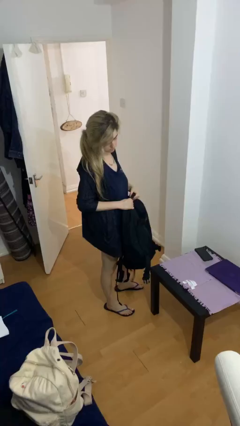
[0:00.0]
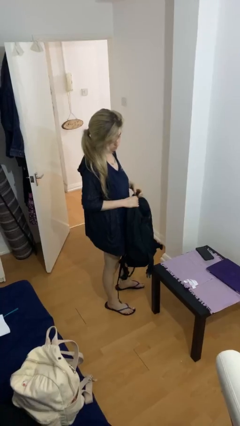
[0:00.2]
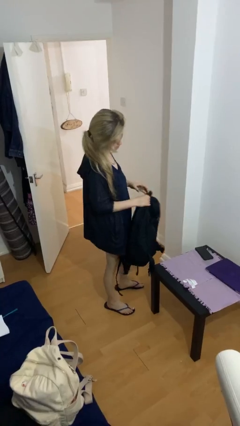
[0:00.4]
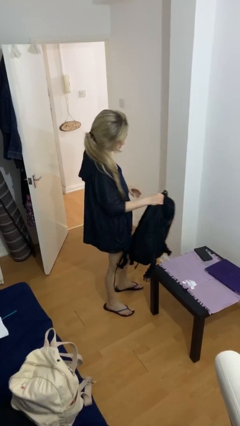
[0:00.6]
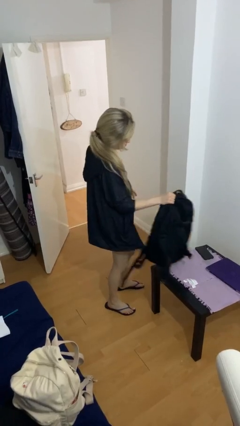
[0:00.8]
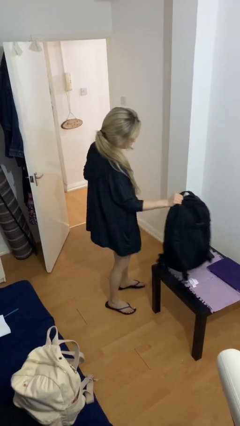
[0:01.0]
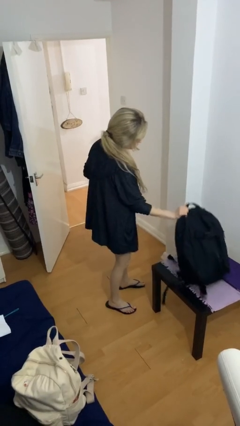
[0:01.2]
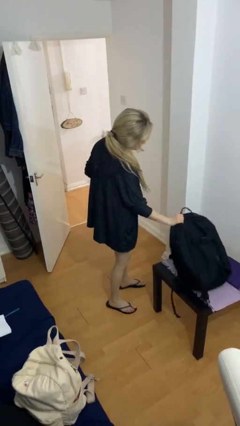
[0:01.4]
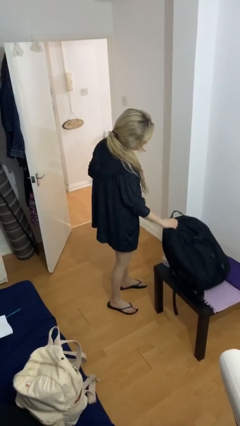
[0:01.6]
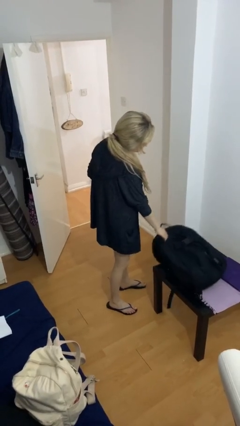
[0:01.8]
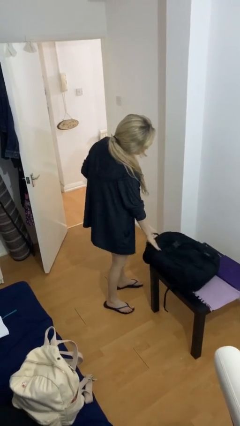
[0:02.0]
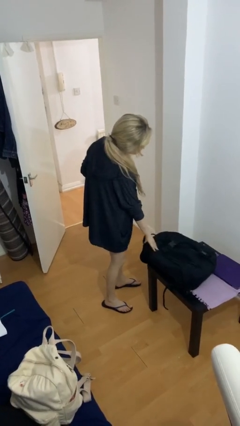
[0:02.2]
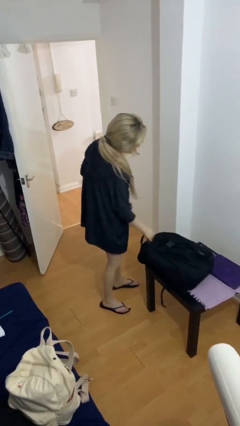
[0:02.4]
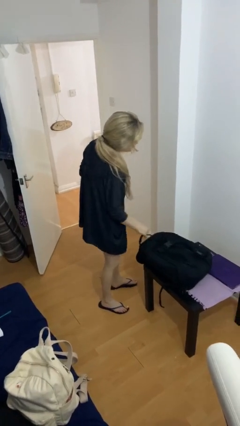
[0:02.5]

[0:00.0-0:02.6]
person puts down object on table

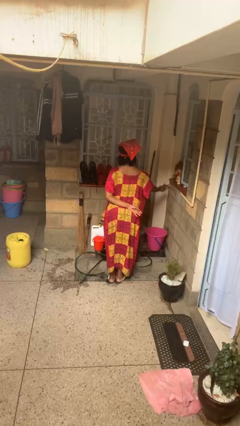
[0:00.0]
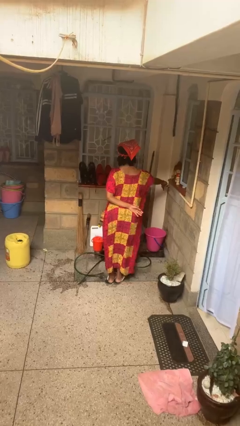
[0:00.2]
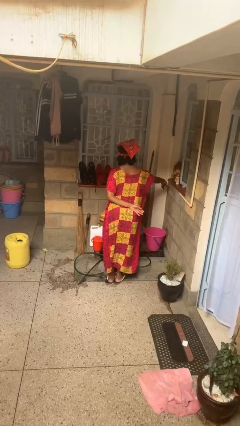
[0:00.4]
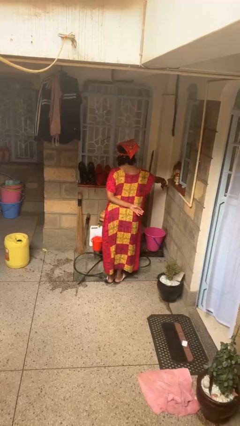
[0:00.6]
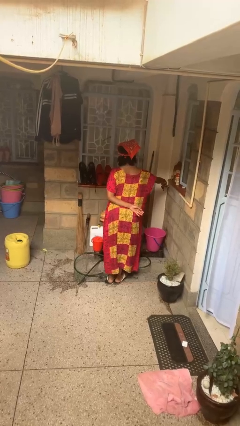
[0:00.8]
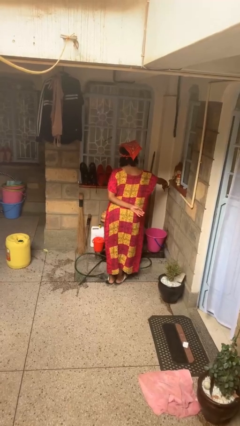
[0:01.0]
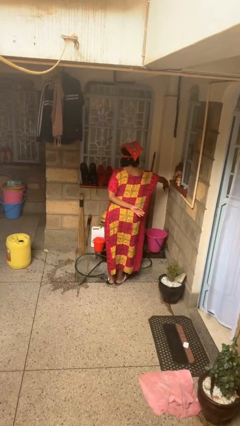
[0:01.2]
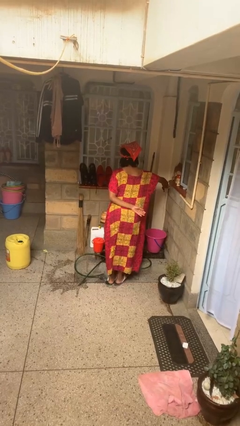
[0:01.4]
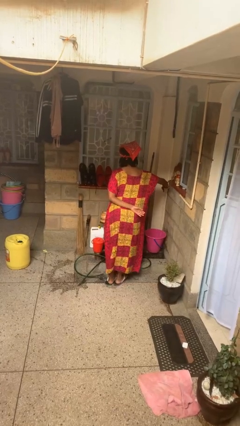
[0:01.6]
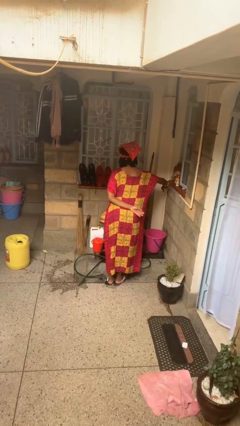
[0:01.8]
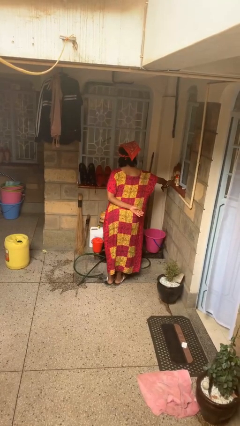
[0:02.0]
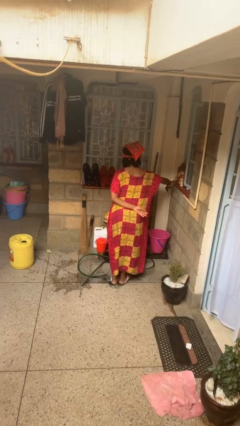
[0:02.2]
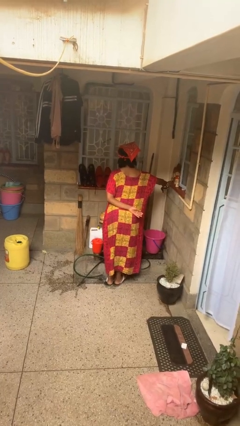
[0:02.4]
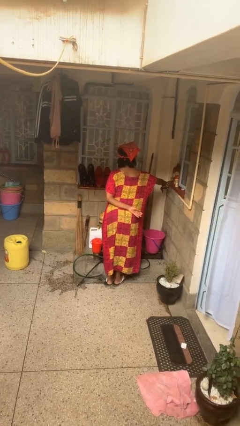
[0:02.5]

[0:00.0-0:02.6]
person turns on faucet

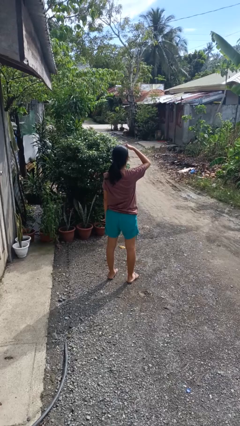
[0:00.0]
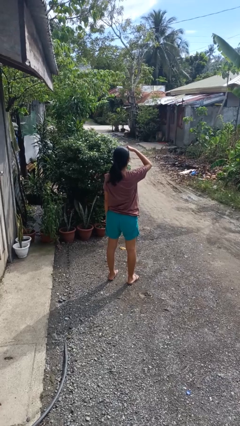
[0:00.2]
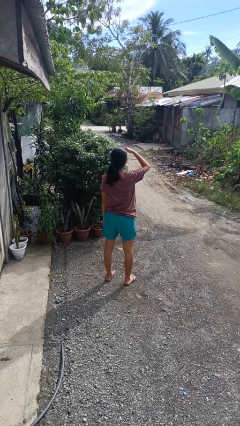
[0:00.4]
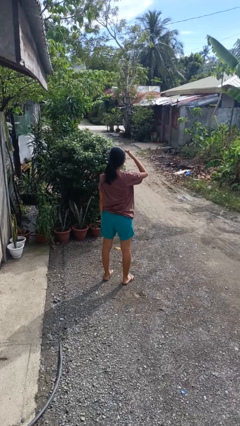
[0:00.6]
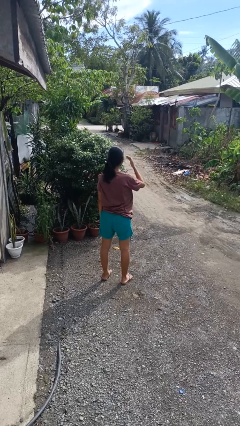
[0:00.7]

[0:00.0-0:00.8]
person shades eyes

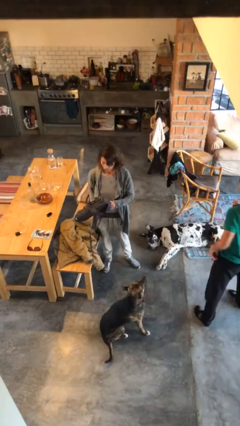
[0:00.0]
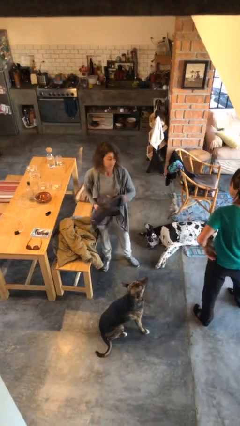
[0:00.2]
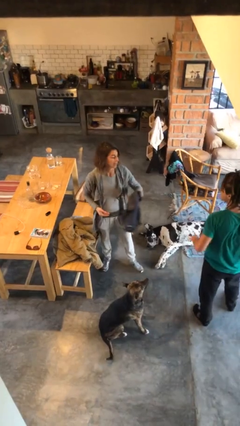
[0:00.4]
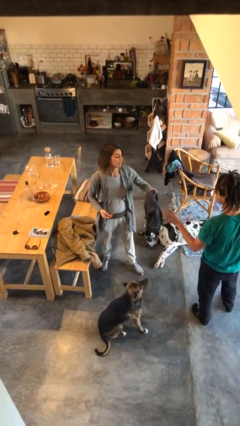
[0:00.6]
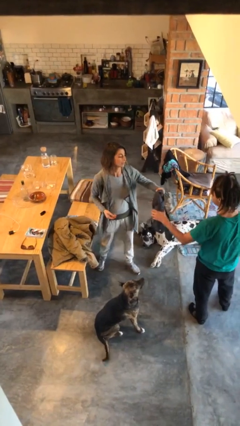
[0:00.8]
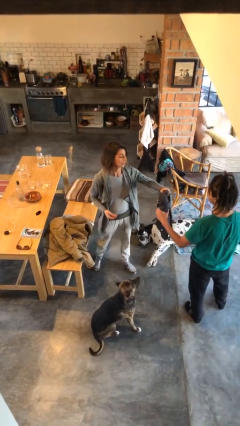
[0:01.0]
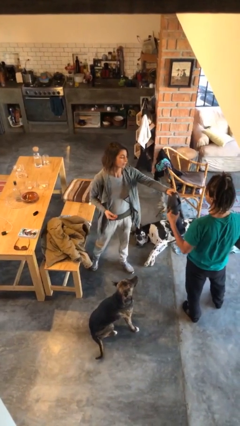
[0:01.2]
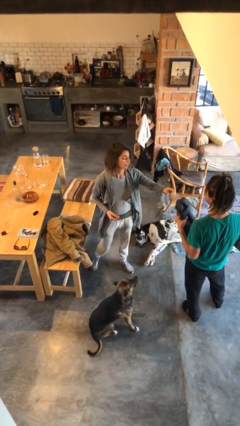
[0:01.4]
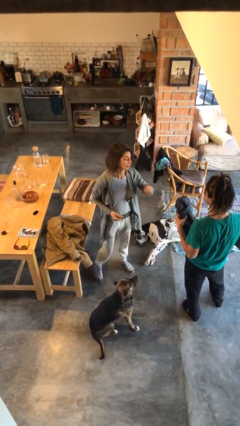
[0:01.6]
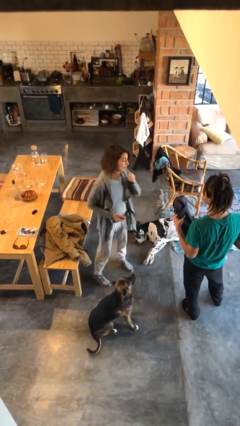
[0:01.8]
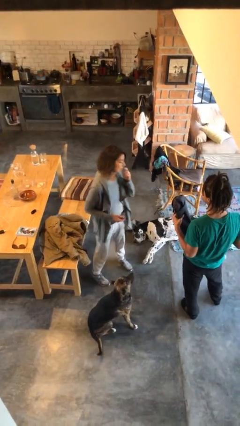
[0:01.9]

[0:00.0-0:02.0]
person transfers object to person

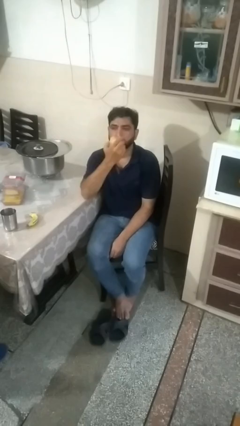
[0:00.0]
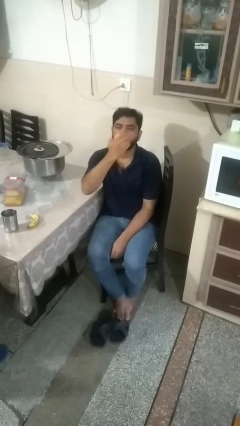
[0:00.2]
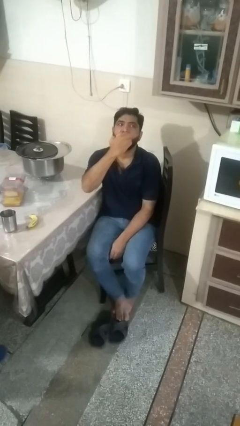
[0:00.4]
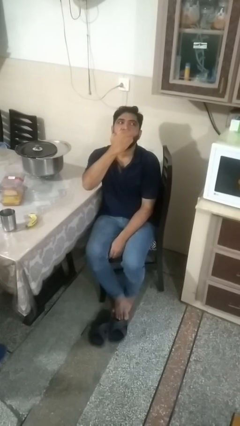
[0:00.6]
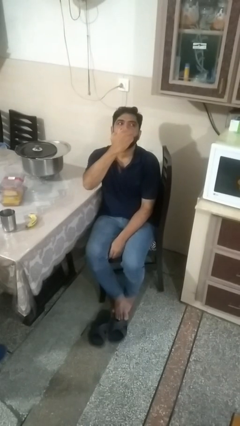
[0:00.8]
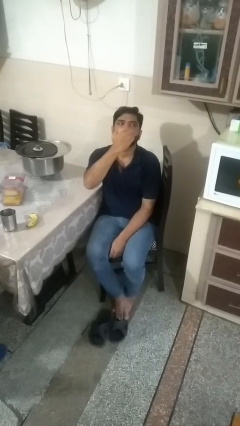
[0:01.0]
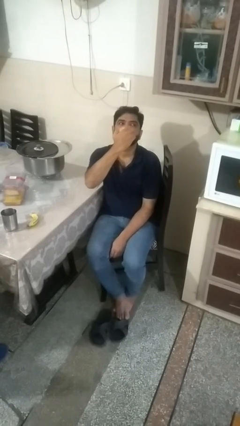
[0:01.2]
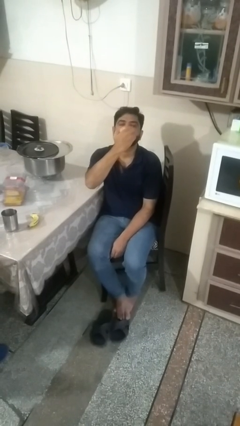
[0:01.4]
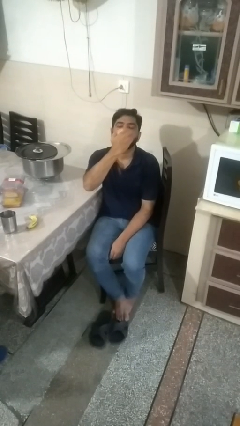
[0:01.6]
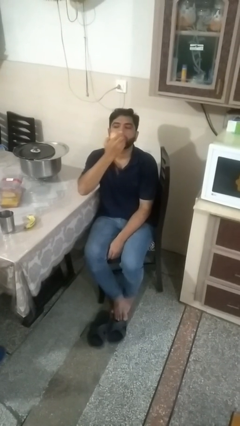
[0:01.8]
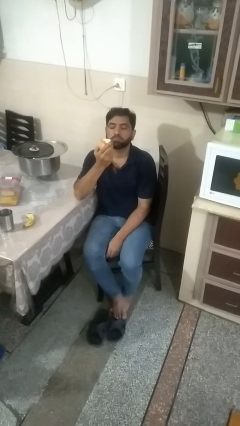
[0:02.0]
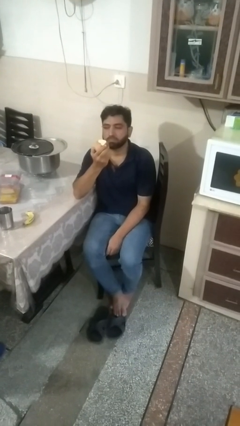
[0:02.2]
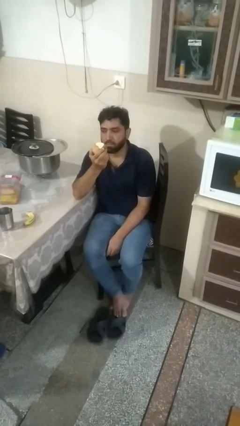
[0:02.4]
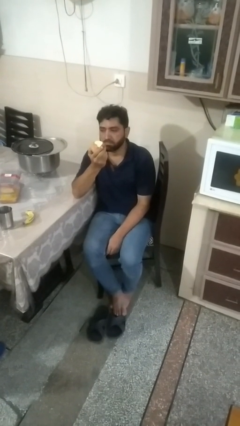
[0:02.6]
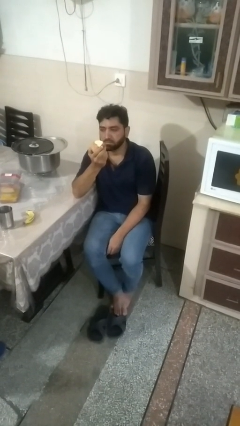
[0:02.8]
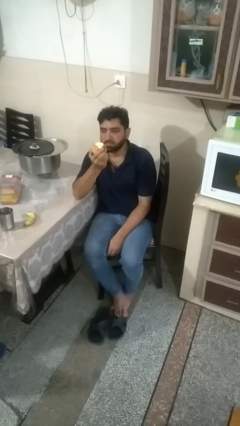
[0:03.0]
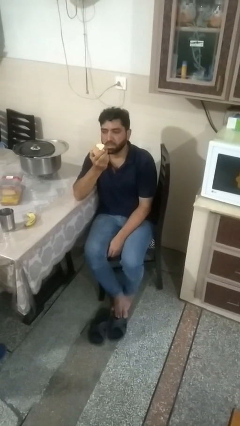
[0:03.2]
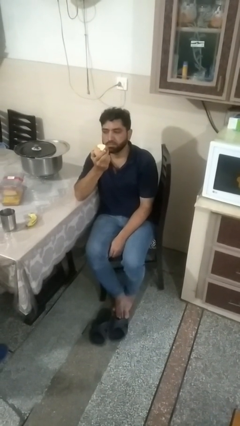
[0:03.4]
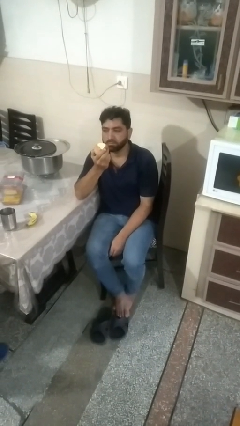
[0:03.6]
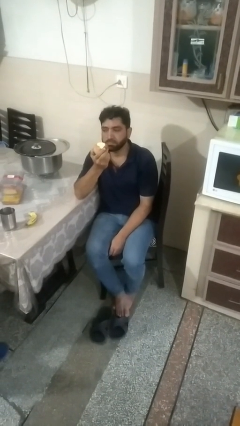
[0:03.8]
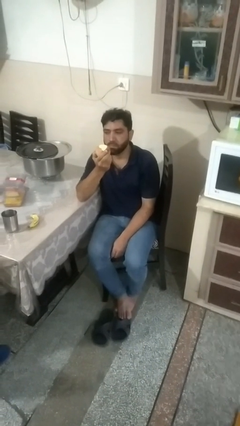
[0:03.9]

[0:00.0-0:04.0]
person eats apple

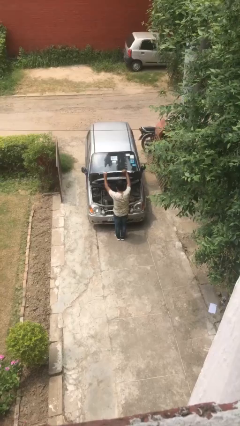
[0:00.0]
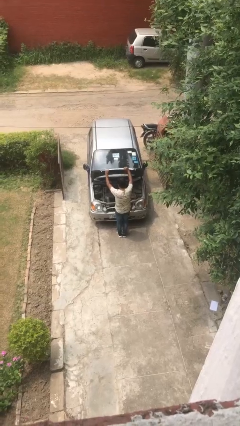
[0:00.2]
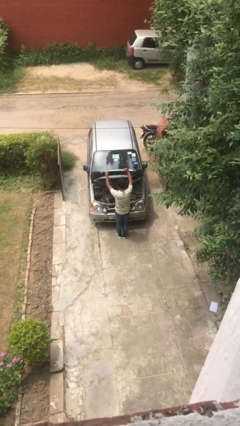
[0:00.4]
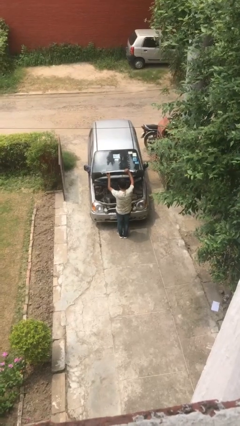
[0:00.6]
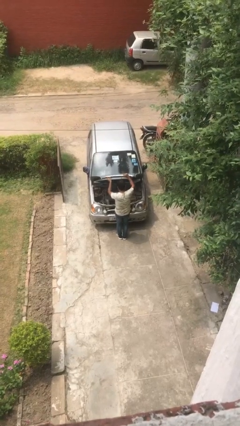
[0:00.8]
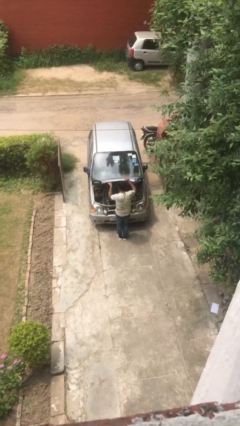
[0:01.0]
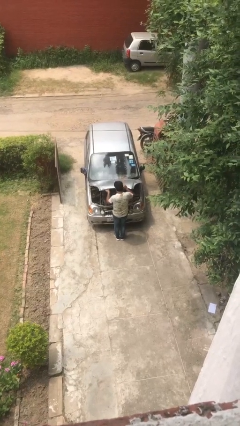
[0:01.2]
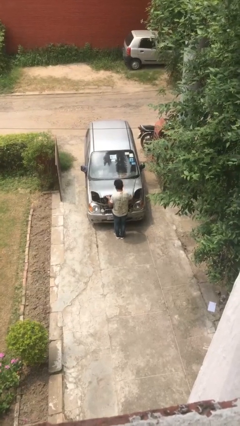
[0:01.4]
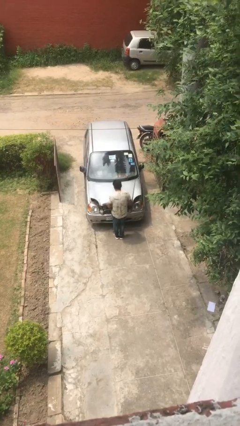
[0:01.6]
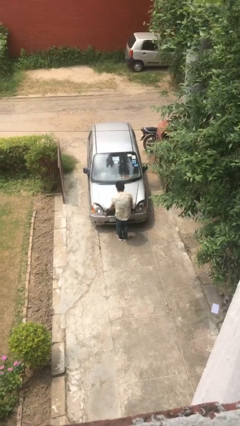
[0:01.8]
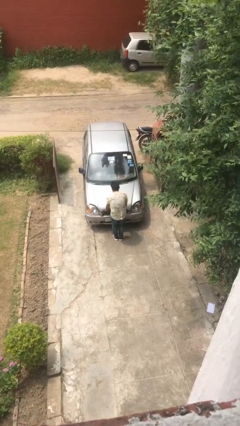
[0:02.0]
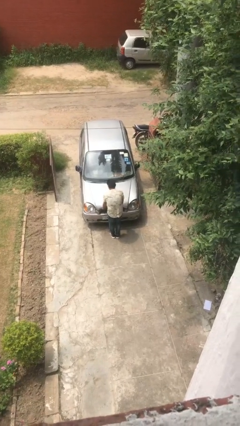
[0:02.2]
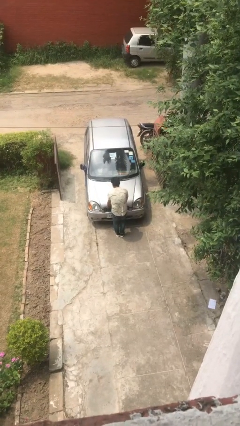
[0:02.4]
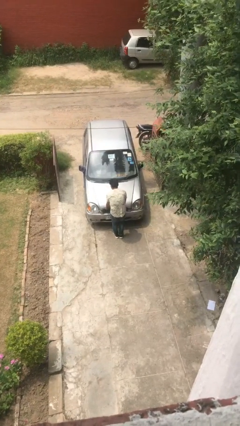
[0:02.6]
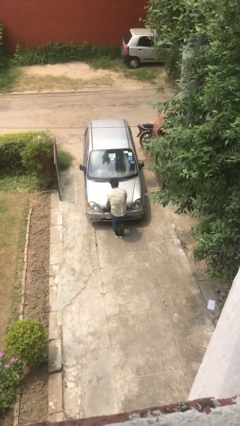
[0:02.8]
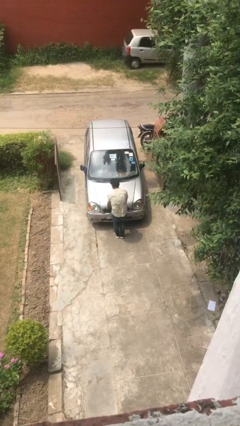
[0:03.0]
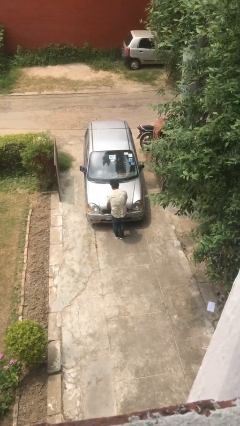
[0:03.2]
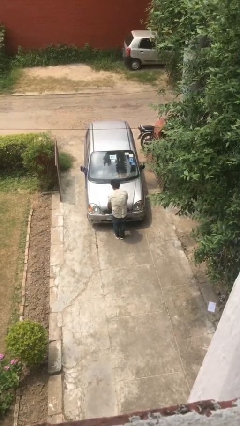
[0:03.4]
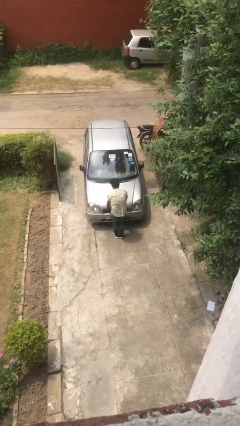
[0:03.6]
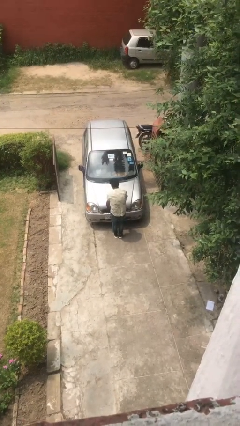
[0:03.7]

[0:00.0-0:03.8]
person closes car hood

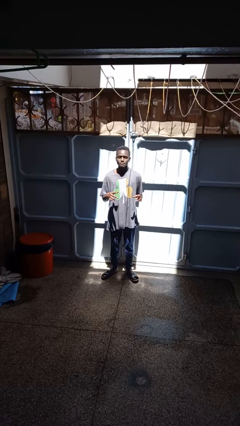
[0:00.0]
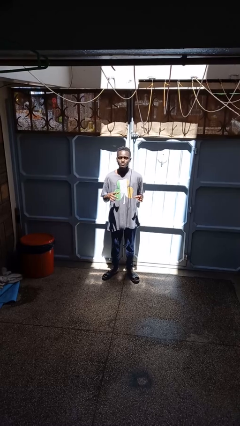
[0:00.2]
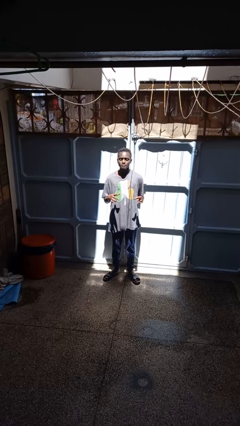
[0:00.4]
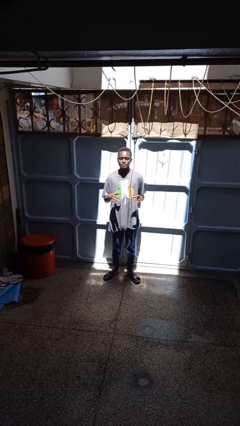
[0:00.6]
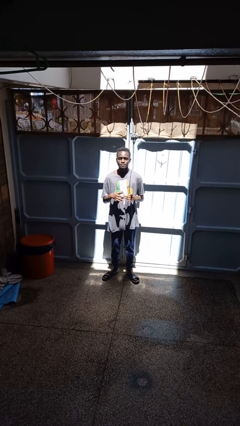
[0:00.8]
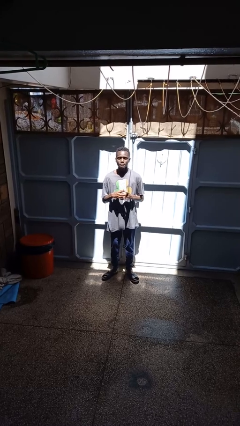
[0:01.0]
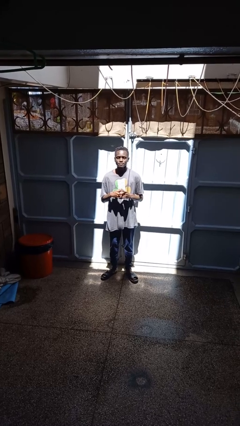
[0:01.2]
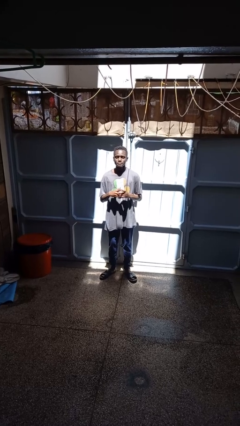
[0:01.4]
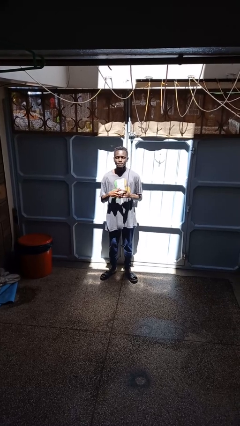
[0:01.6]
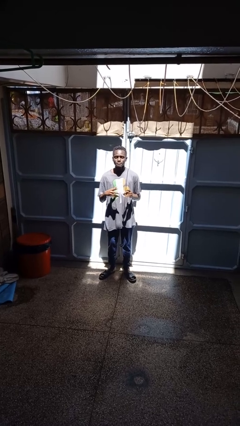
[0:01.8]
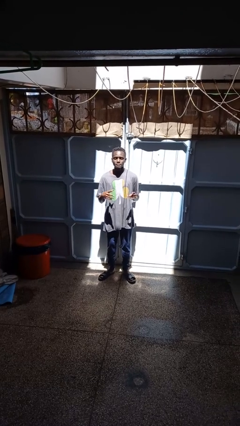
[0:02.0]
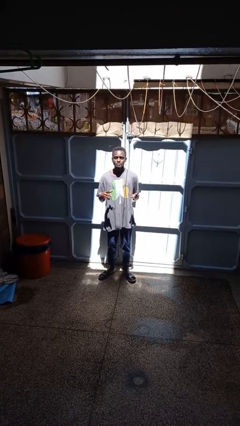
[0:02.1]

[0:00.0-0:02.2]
person takes off ring
